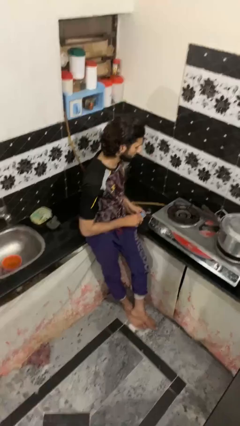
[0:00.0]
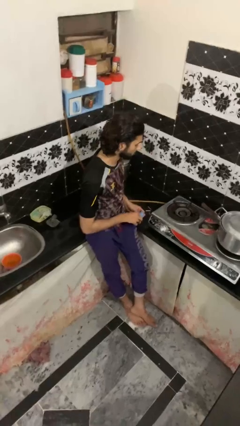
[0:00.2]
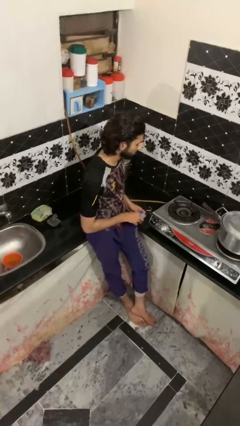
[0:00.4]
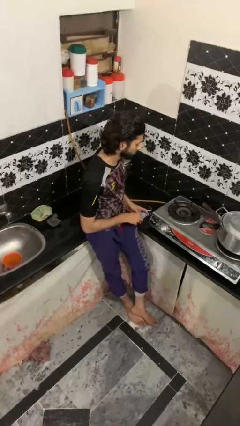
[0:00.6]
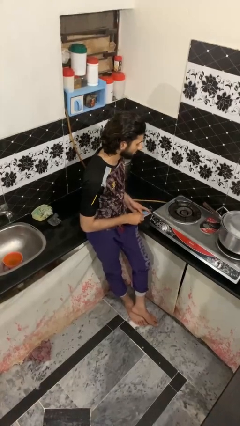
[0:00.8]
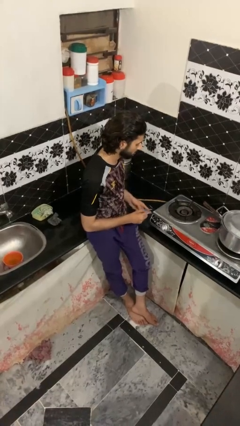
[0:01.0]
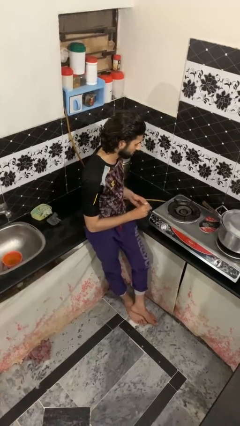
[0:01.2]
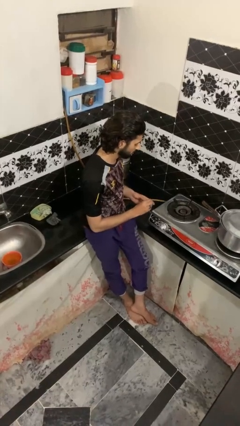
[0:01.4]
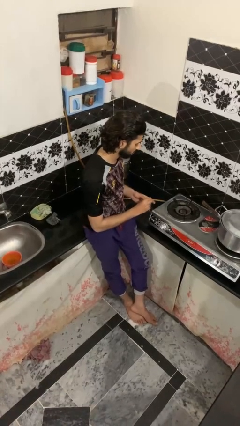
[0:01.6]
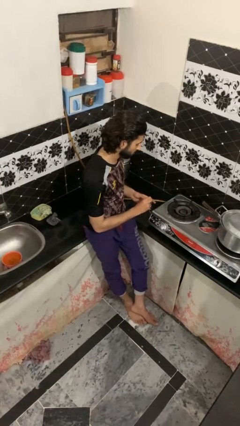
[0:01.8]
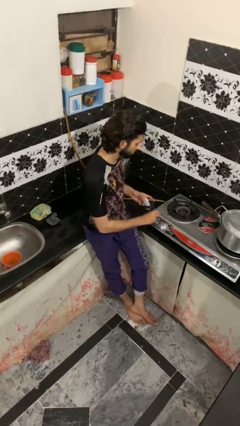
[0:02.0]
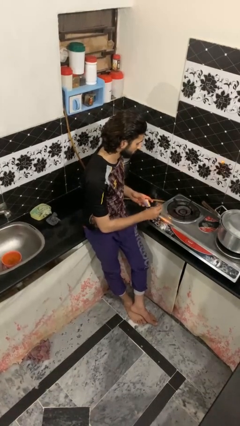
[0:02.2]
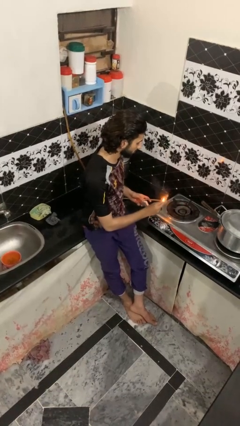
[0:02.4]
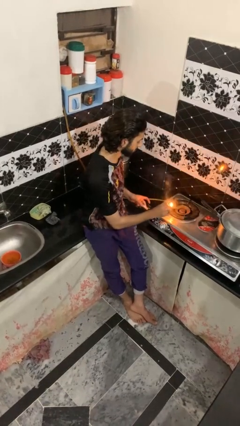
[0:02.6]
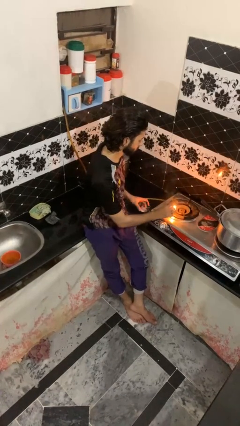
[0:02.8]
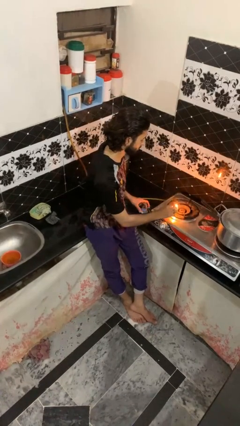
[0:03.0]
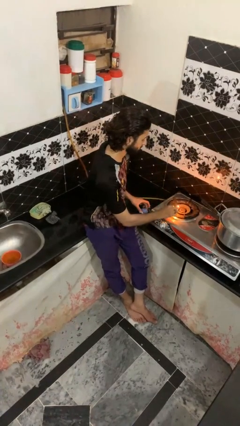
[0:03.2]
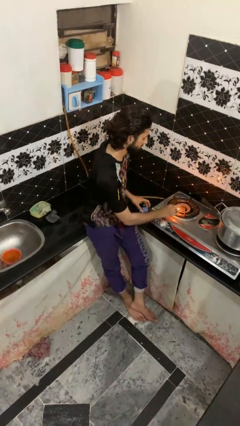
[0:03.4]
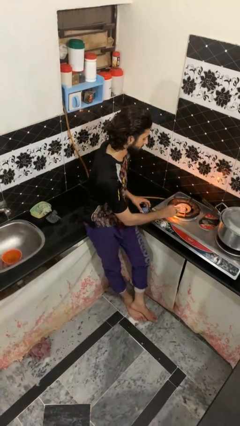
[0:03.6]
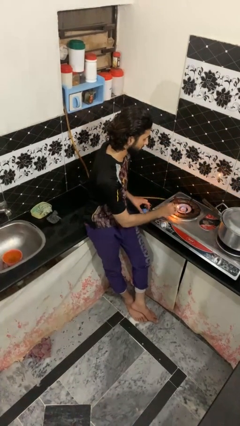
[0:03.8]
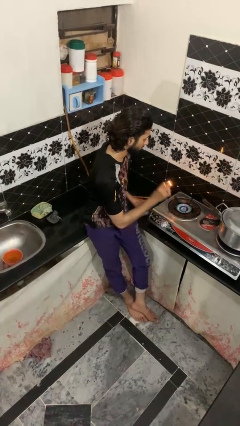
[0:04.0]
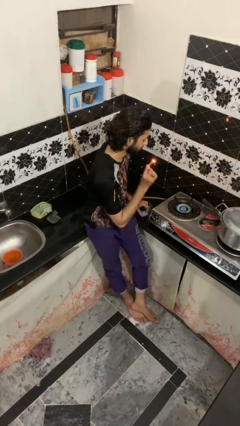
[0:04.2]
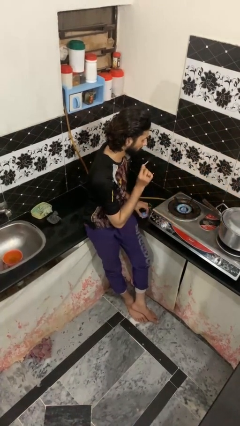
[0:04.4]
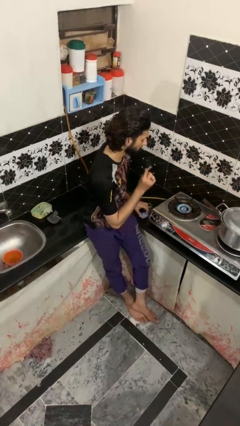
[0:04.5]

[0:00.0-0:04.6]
person turns on stovetop

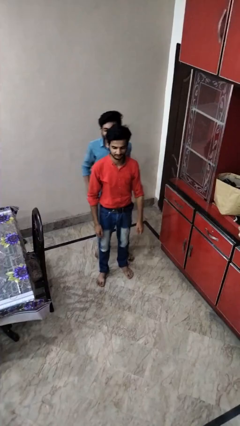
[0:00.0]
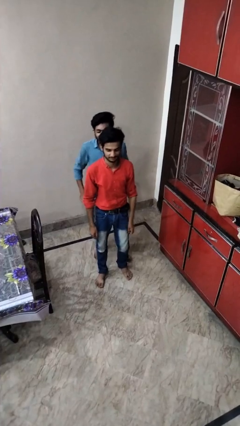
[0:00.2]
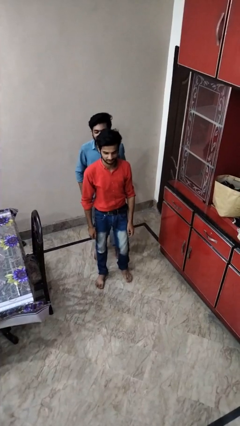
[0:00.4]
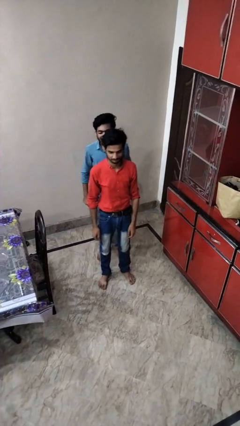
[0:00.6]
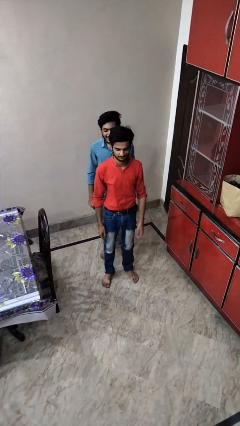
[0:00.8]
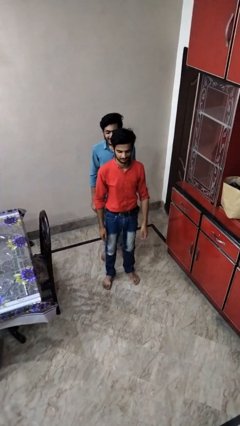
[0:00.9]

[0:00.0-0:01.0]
person puts down person

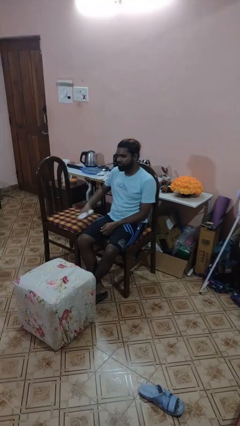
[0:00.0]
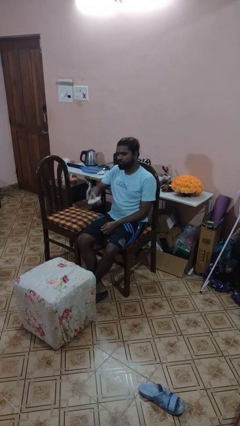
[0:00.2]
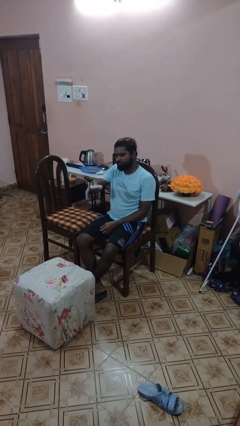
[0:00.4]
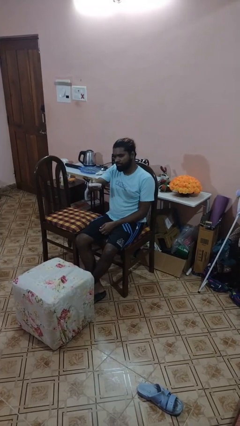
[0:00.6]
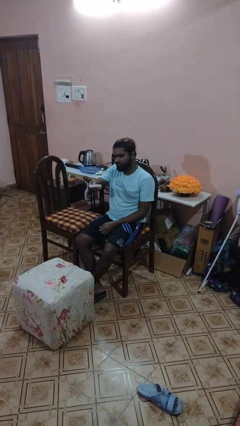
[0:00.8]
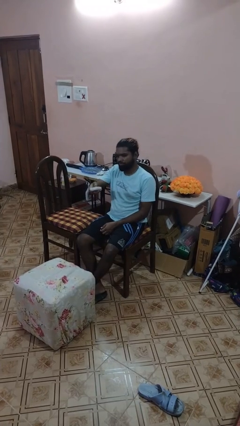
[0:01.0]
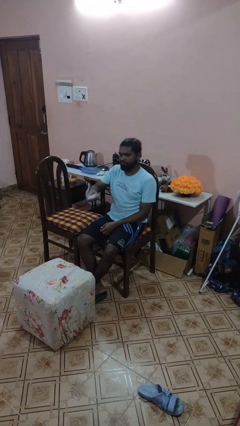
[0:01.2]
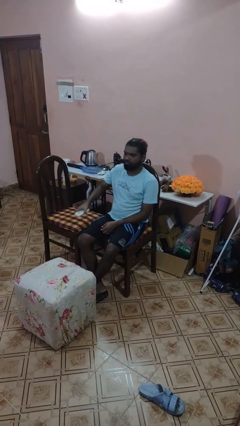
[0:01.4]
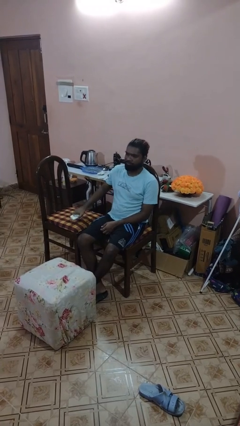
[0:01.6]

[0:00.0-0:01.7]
person uses television remote

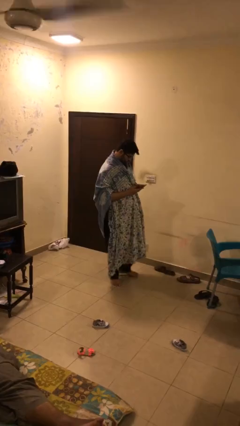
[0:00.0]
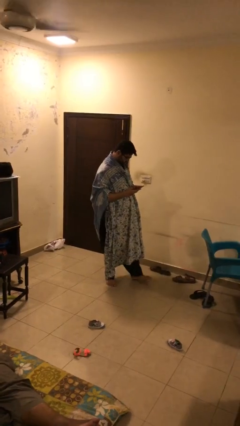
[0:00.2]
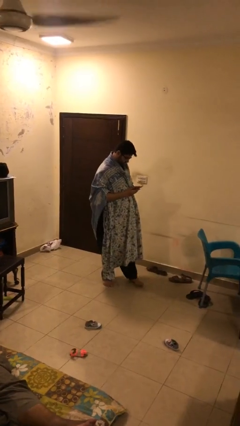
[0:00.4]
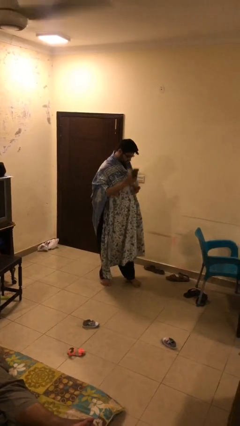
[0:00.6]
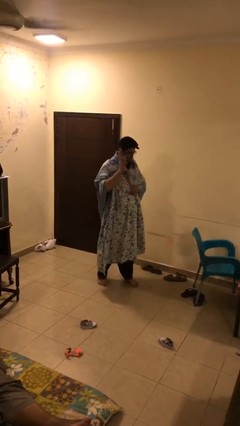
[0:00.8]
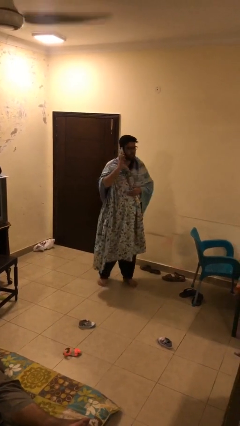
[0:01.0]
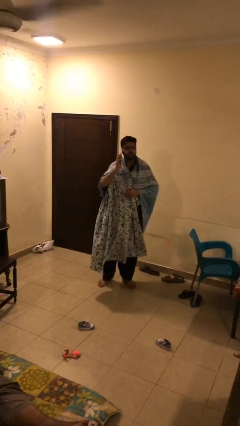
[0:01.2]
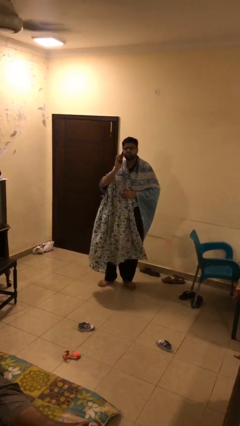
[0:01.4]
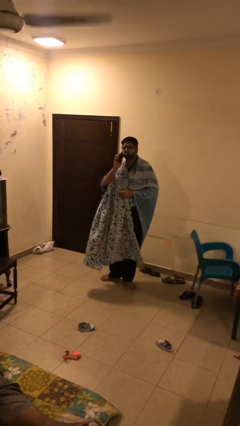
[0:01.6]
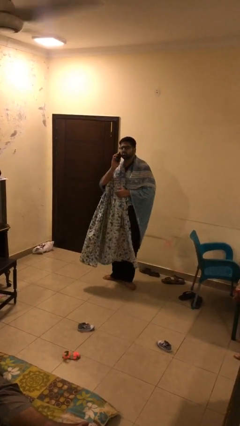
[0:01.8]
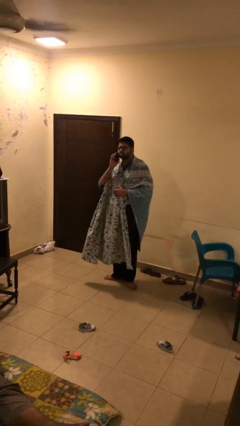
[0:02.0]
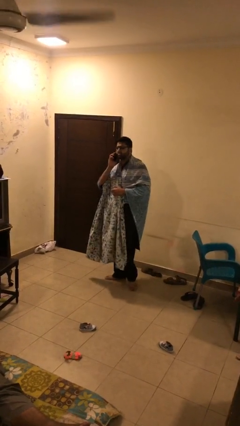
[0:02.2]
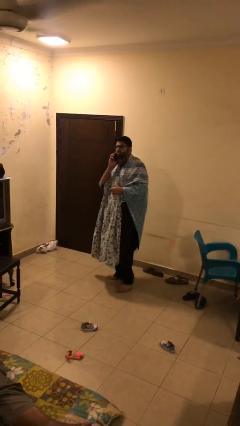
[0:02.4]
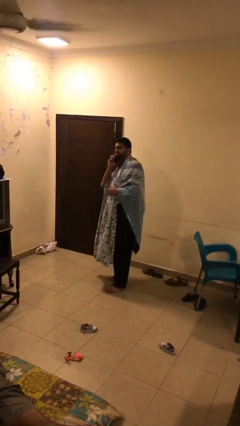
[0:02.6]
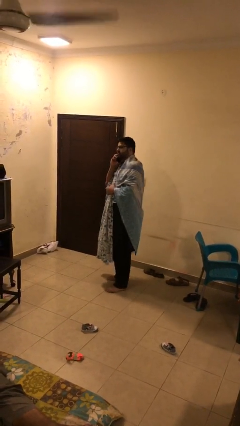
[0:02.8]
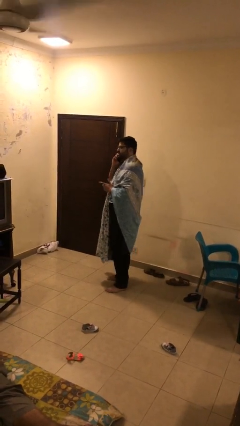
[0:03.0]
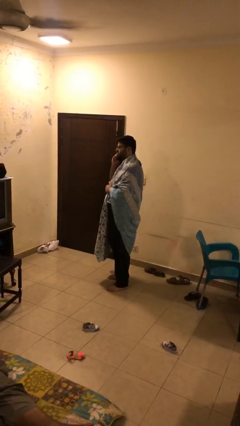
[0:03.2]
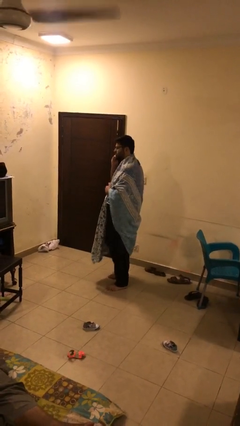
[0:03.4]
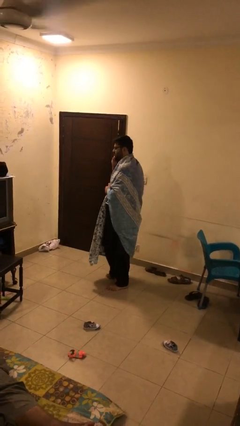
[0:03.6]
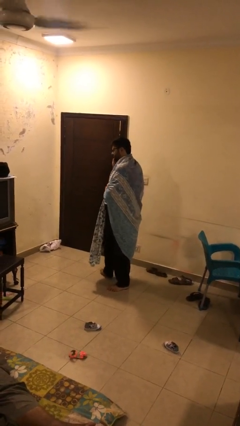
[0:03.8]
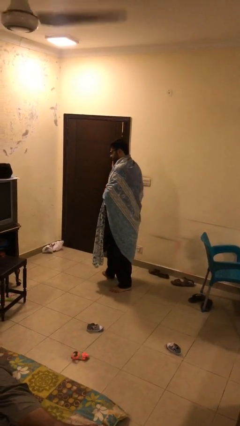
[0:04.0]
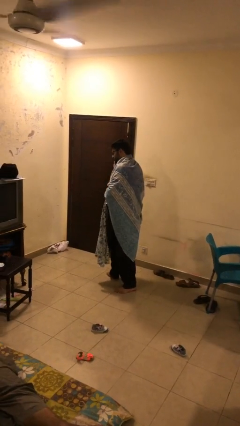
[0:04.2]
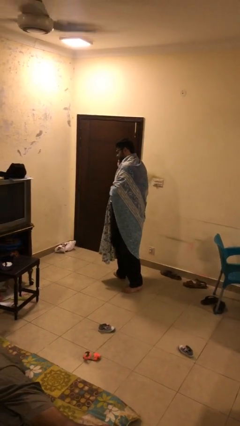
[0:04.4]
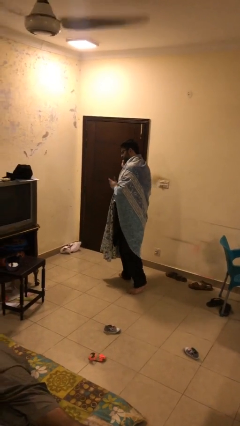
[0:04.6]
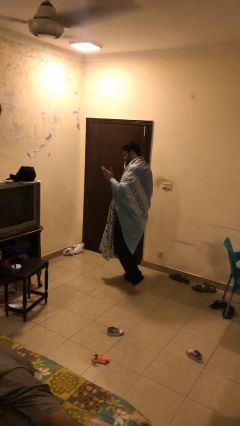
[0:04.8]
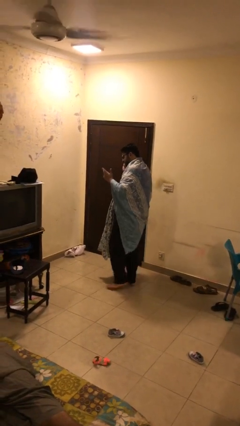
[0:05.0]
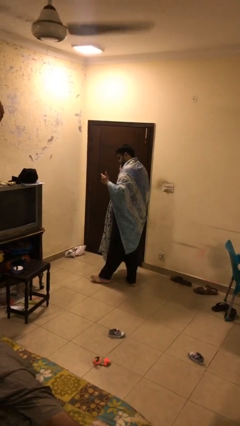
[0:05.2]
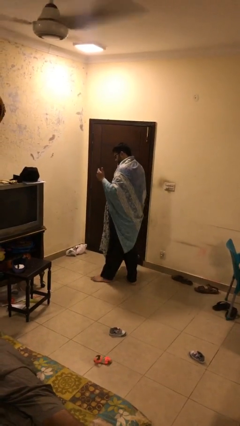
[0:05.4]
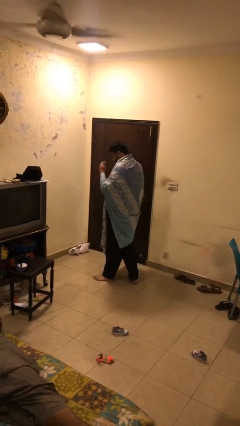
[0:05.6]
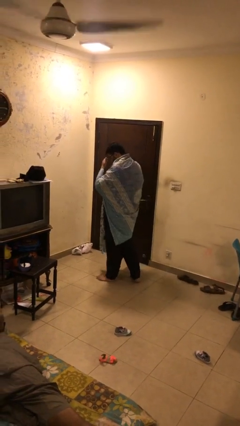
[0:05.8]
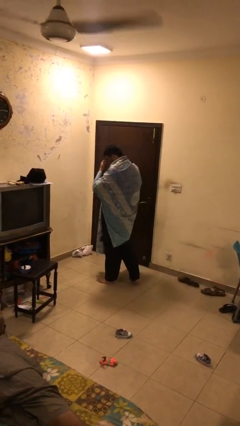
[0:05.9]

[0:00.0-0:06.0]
person talks on phone

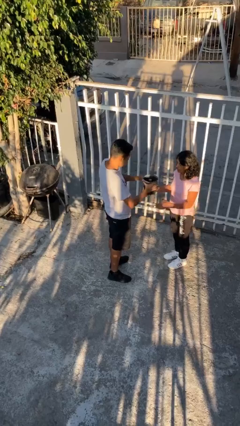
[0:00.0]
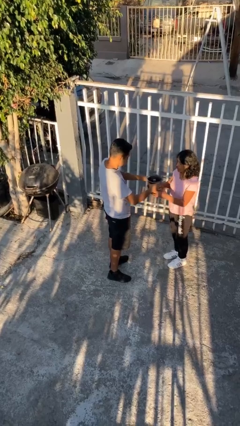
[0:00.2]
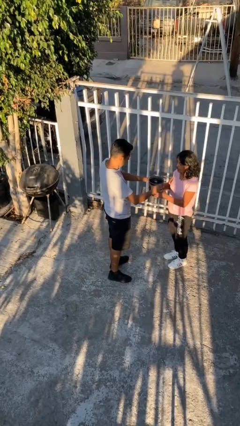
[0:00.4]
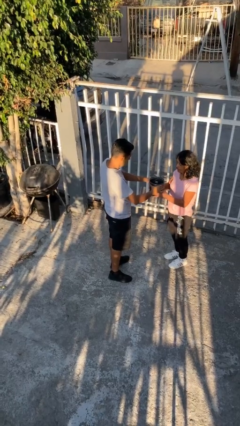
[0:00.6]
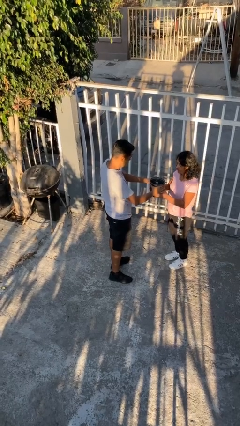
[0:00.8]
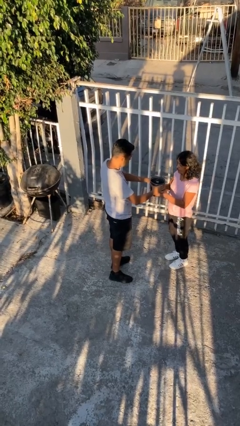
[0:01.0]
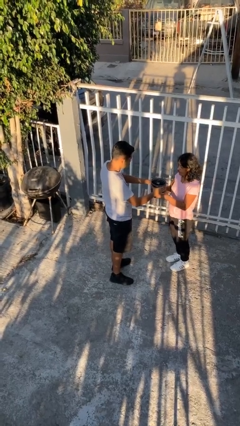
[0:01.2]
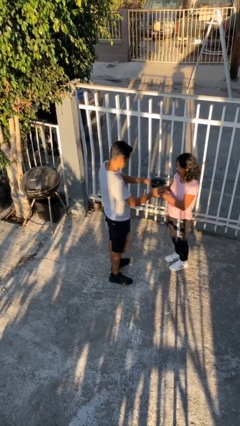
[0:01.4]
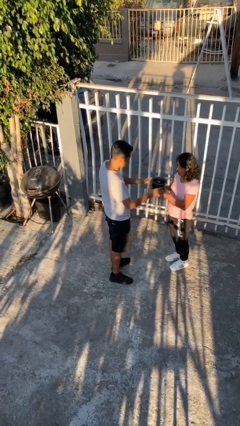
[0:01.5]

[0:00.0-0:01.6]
person transfers object to person

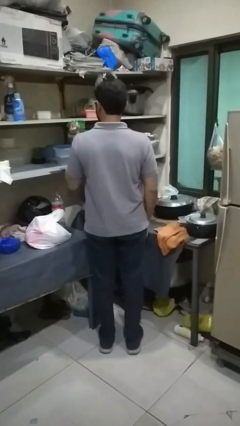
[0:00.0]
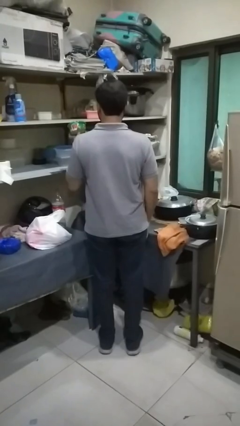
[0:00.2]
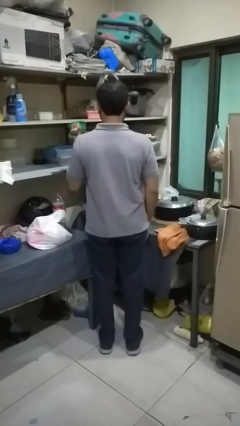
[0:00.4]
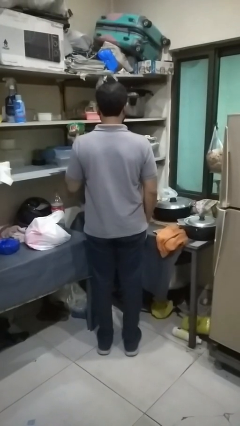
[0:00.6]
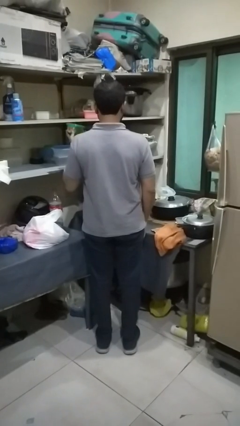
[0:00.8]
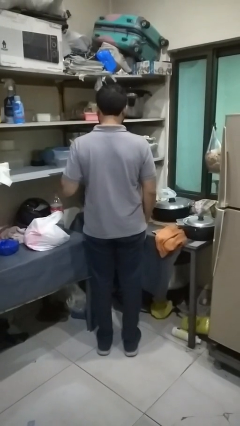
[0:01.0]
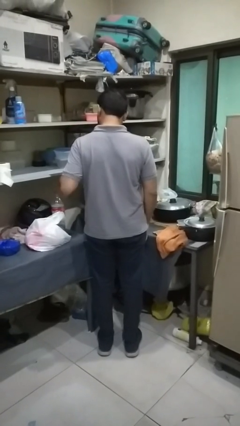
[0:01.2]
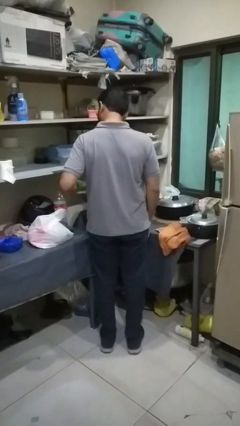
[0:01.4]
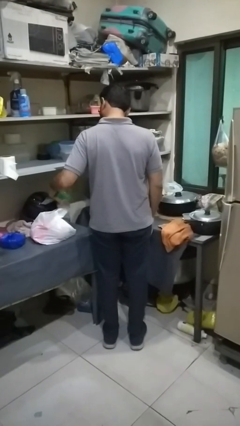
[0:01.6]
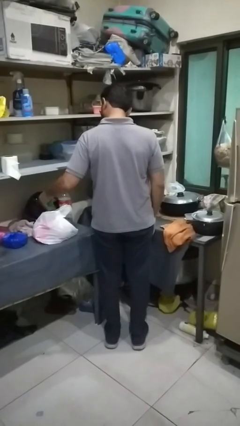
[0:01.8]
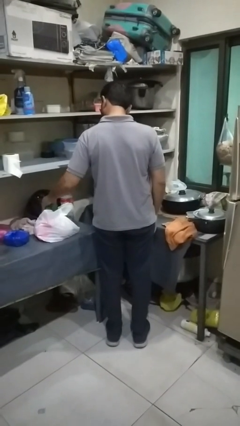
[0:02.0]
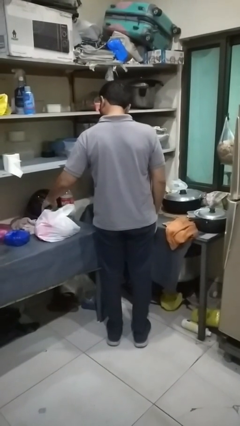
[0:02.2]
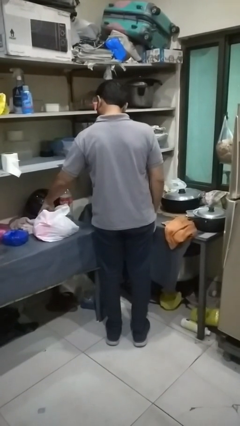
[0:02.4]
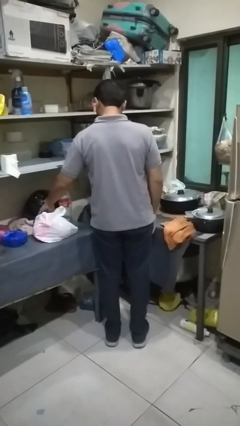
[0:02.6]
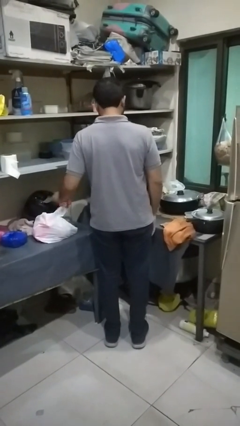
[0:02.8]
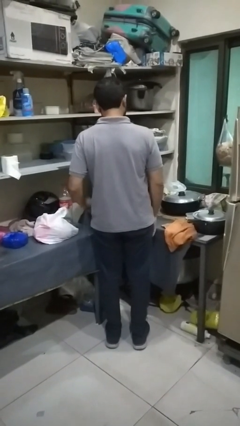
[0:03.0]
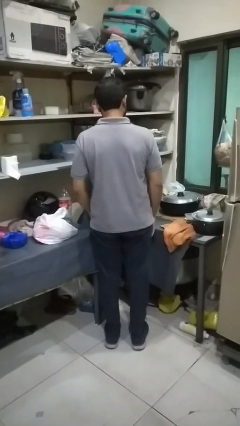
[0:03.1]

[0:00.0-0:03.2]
person puts object into bag
